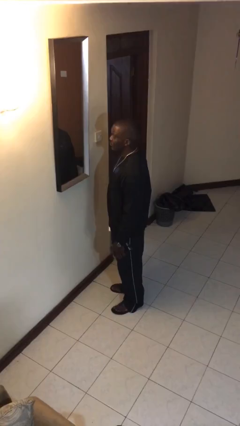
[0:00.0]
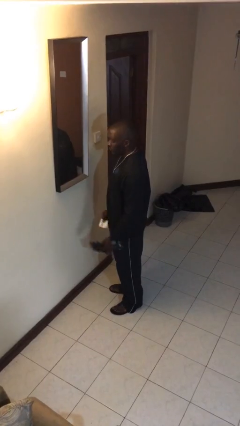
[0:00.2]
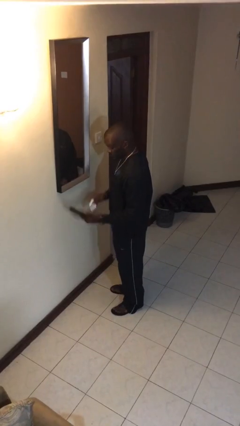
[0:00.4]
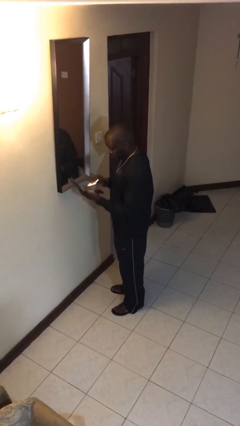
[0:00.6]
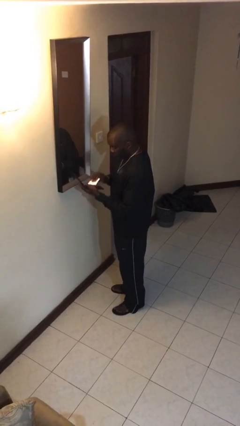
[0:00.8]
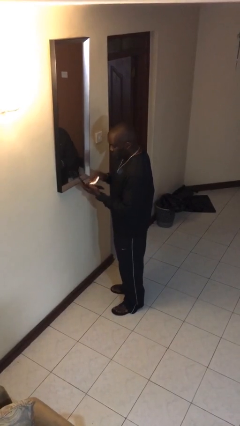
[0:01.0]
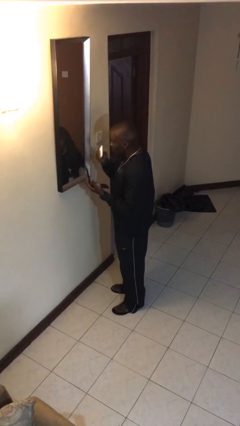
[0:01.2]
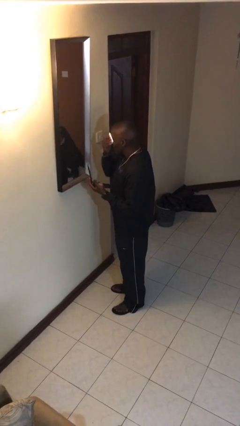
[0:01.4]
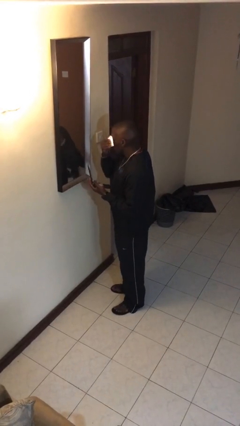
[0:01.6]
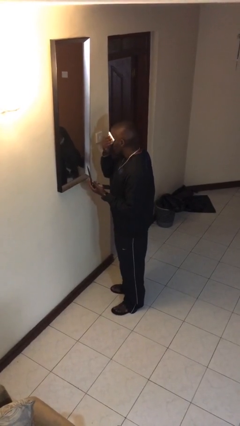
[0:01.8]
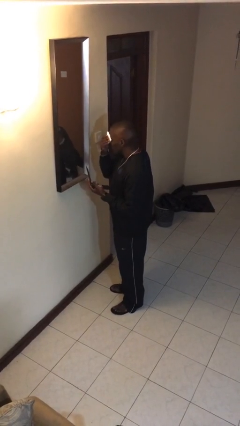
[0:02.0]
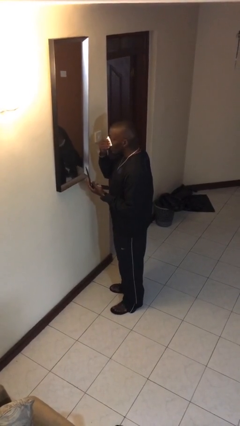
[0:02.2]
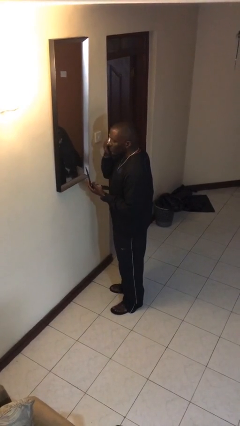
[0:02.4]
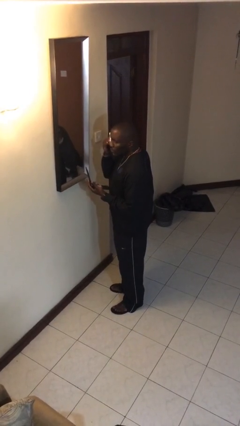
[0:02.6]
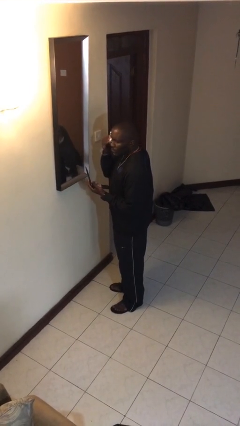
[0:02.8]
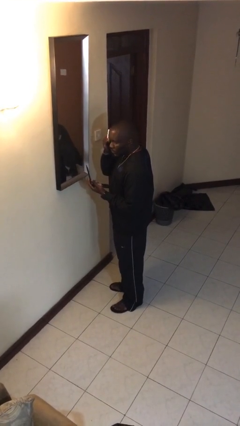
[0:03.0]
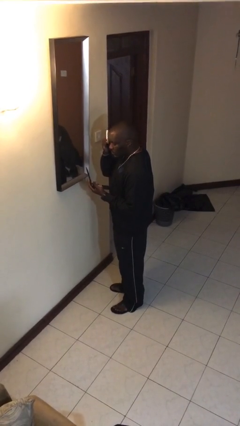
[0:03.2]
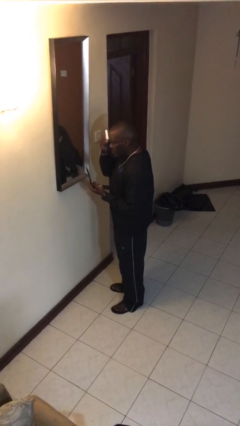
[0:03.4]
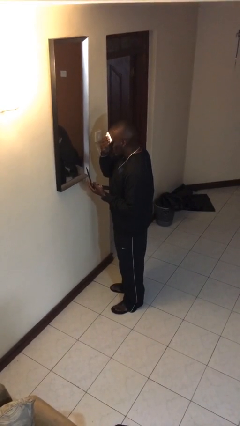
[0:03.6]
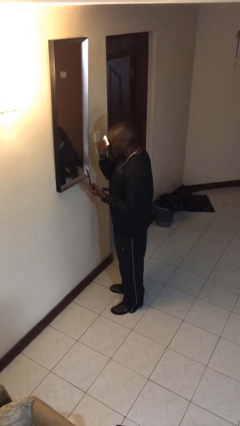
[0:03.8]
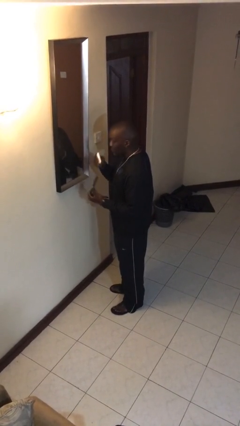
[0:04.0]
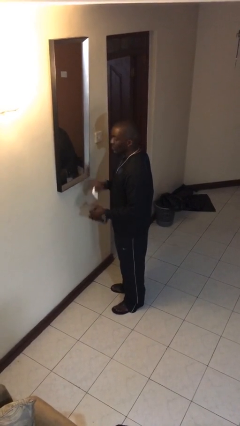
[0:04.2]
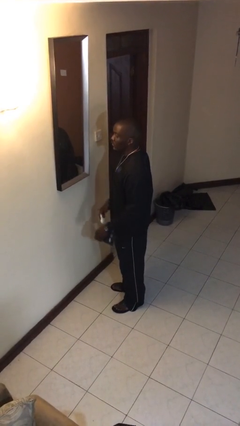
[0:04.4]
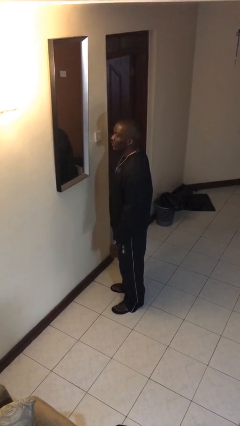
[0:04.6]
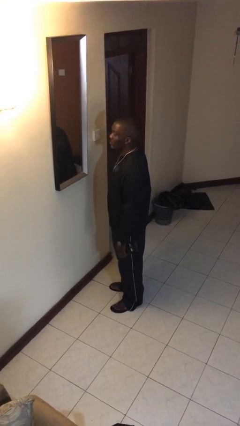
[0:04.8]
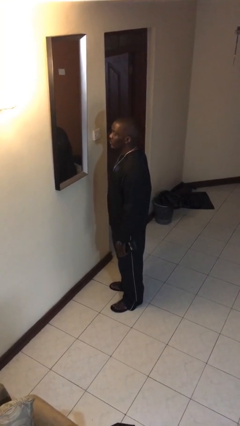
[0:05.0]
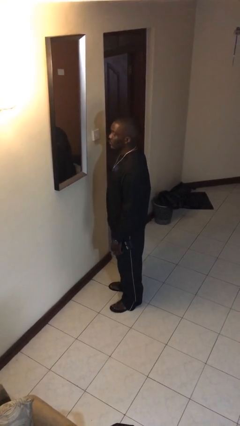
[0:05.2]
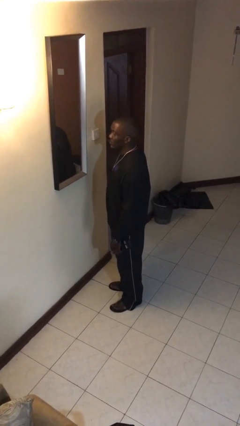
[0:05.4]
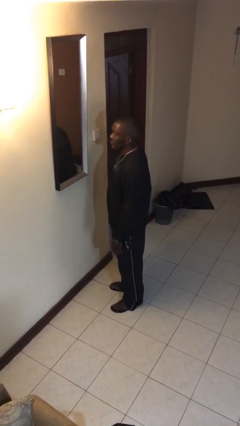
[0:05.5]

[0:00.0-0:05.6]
person applies foundation makeup

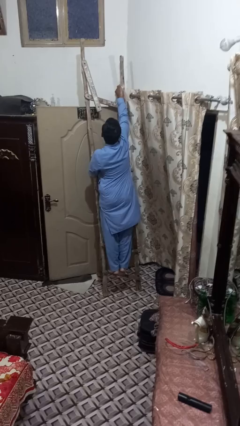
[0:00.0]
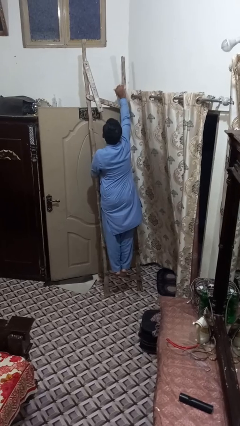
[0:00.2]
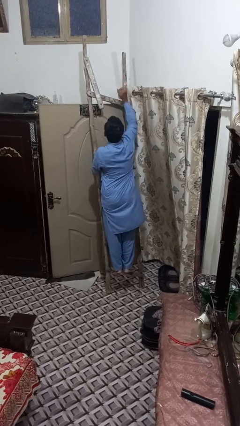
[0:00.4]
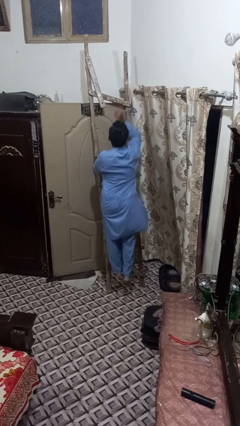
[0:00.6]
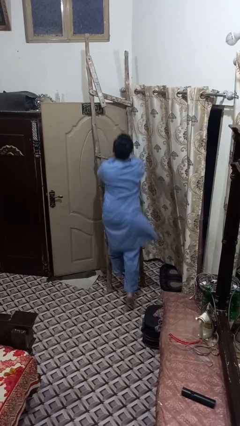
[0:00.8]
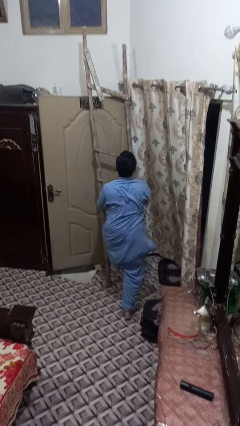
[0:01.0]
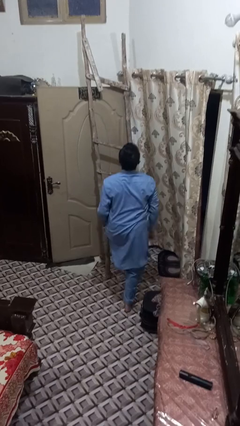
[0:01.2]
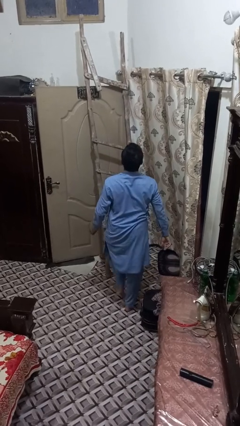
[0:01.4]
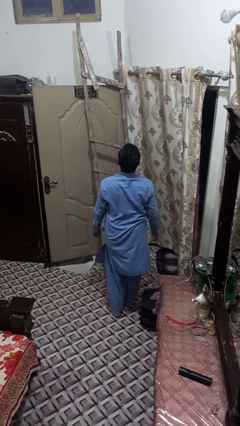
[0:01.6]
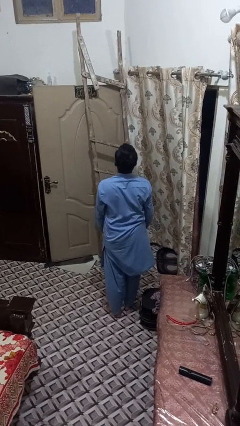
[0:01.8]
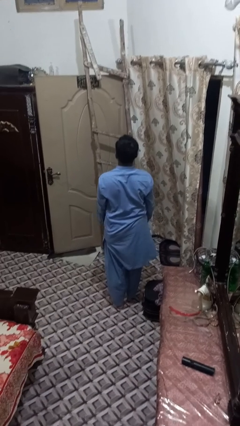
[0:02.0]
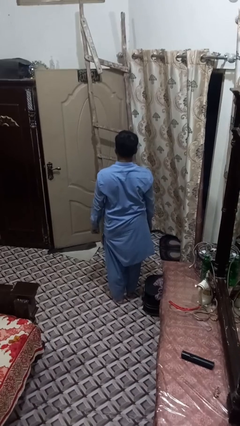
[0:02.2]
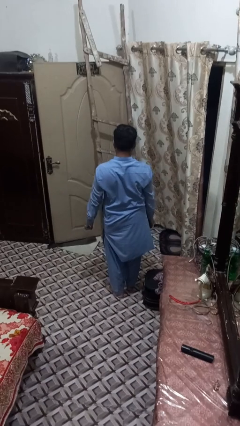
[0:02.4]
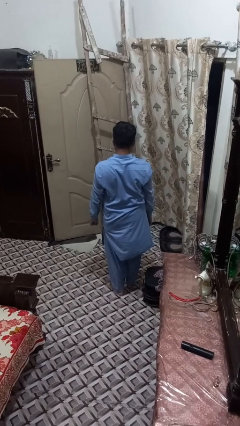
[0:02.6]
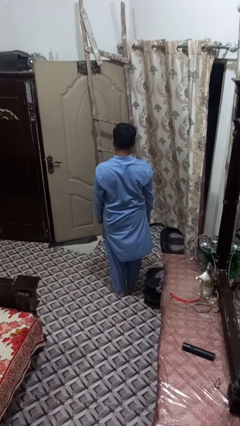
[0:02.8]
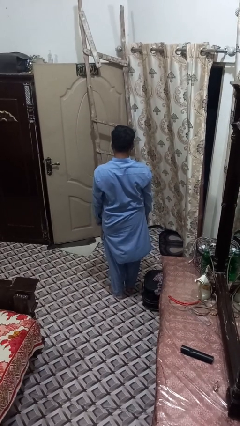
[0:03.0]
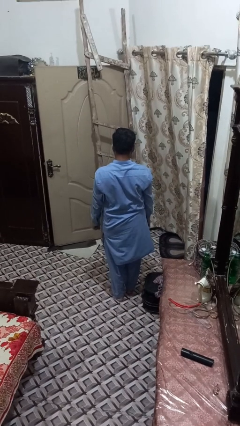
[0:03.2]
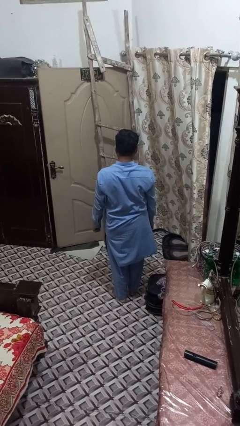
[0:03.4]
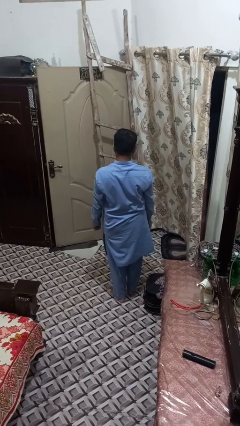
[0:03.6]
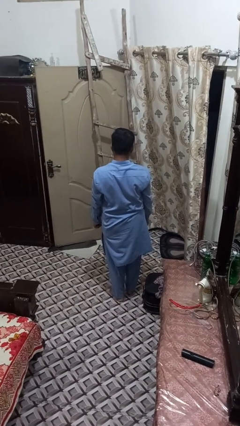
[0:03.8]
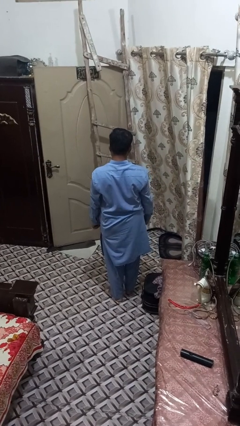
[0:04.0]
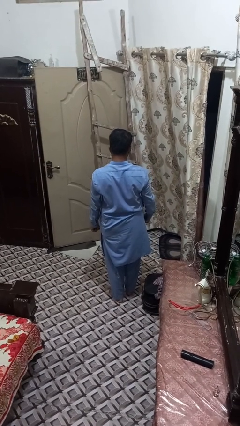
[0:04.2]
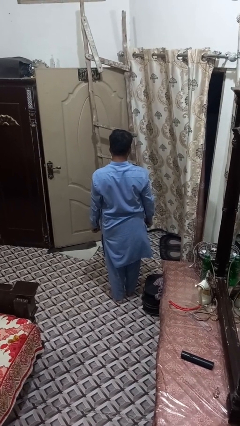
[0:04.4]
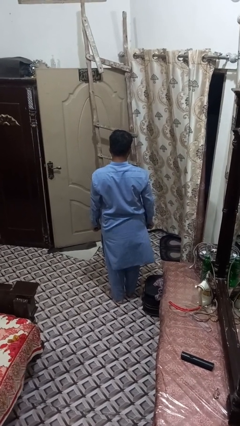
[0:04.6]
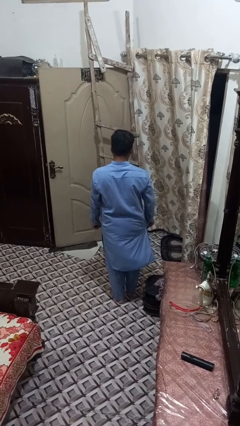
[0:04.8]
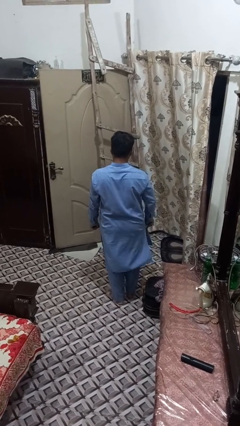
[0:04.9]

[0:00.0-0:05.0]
person climbs down ladder

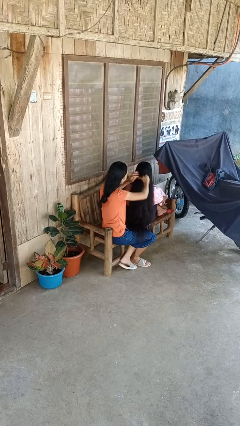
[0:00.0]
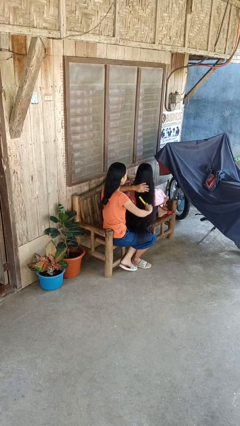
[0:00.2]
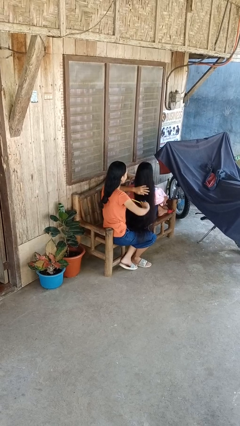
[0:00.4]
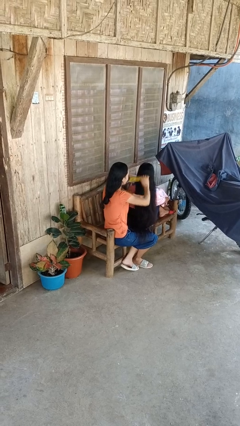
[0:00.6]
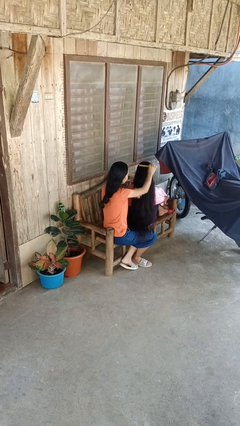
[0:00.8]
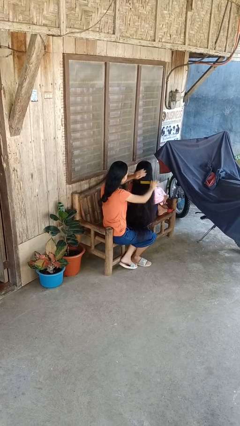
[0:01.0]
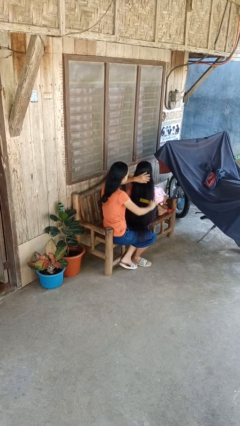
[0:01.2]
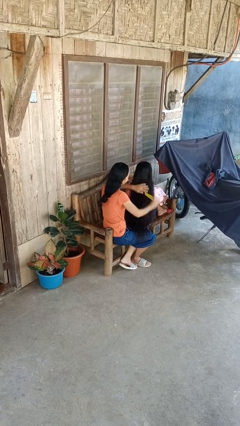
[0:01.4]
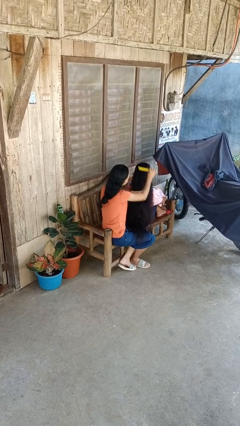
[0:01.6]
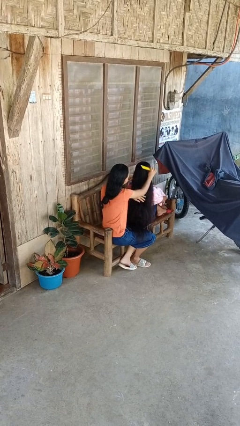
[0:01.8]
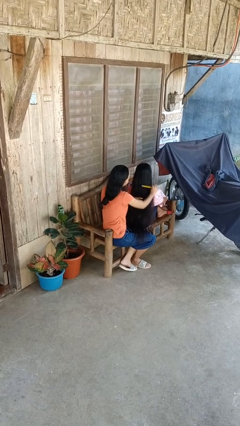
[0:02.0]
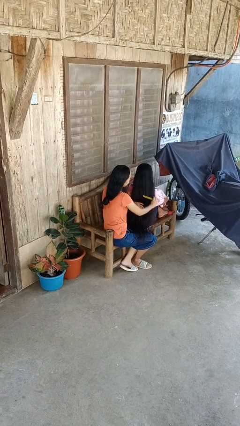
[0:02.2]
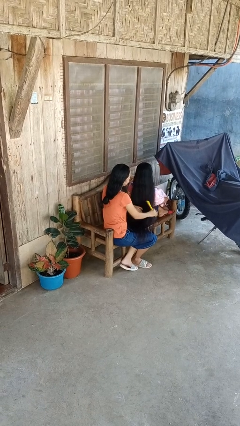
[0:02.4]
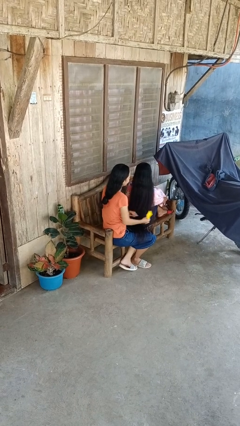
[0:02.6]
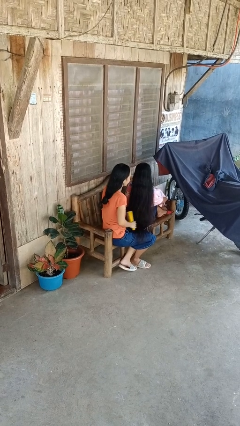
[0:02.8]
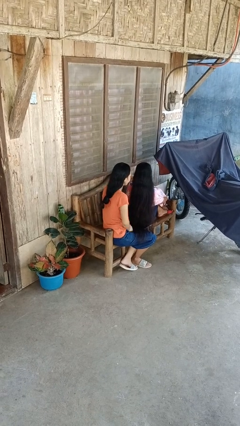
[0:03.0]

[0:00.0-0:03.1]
person brushes hair of person

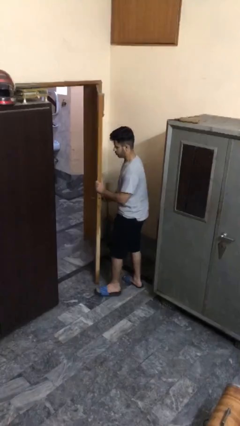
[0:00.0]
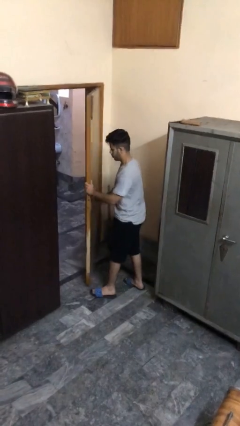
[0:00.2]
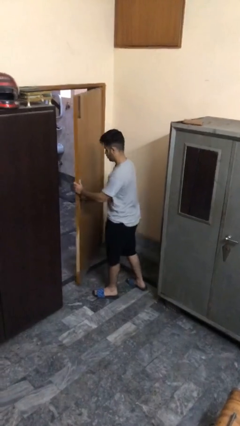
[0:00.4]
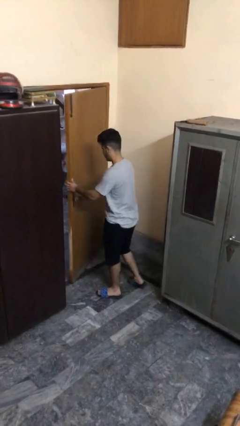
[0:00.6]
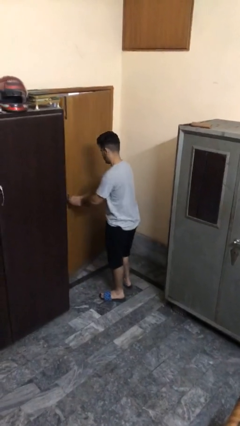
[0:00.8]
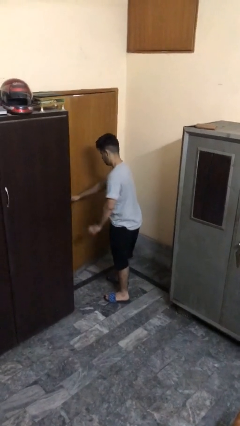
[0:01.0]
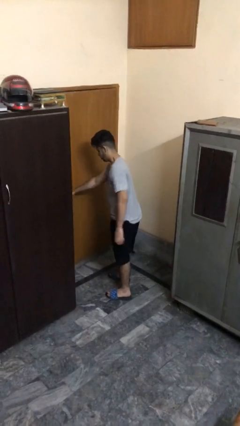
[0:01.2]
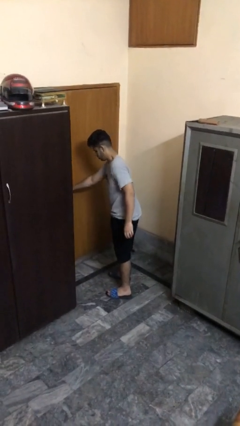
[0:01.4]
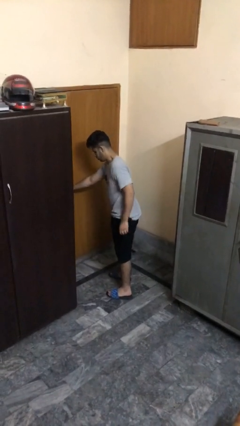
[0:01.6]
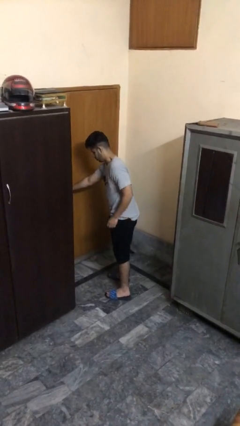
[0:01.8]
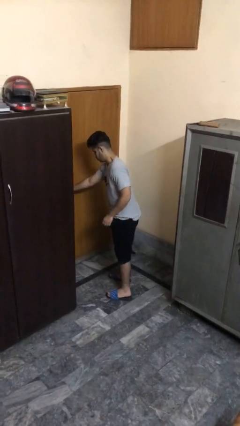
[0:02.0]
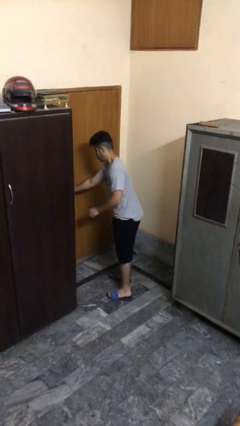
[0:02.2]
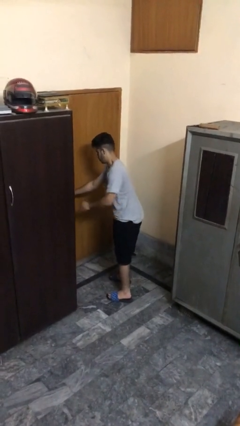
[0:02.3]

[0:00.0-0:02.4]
person closes facility door

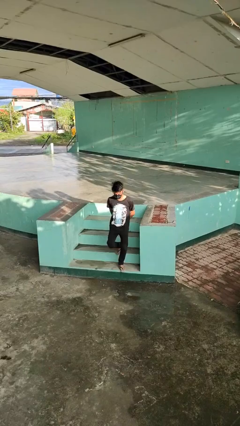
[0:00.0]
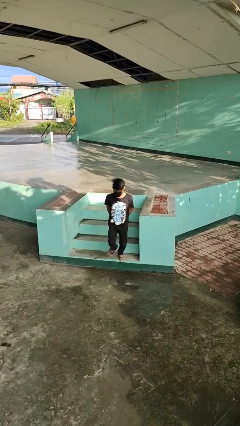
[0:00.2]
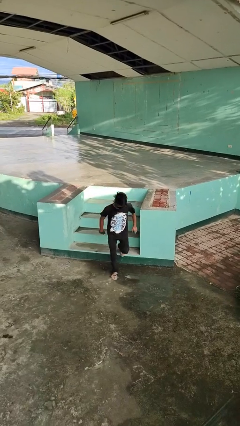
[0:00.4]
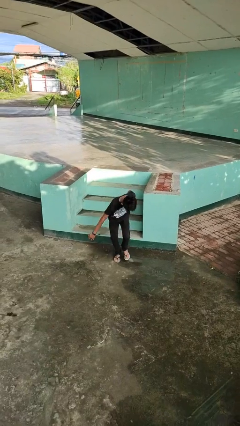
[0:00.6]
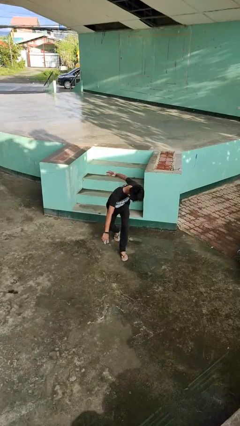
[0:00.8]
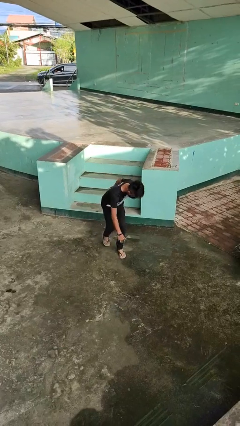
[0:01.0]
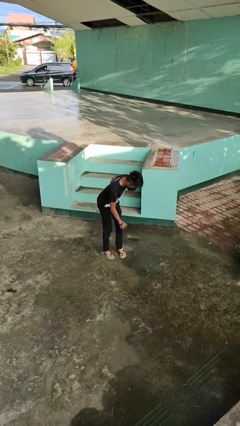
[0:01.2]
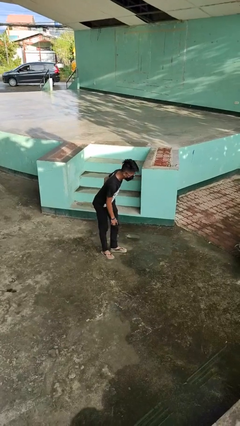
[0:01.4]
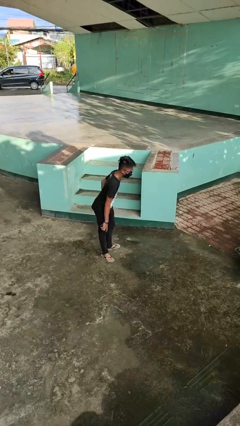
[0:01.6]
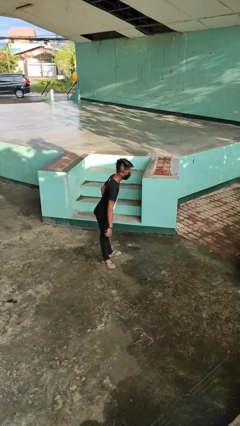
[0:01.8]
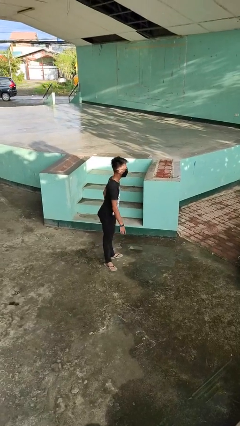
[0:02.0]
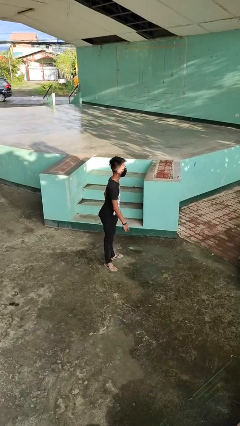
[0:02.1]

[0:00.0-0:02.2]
person trips on stair
